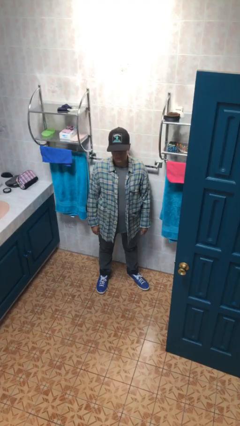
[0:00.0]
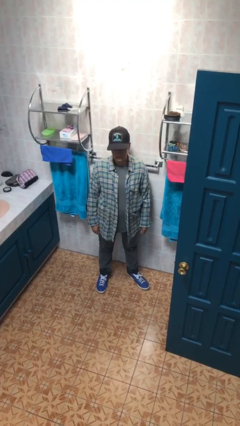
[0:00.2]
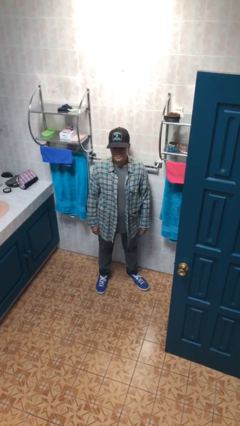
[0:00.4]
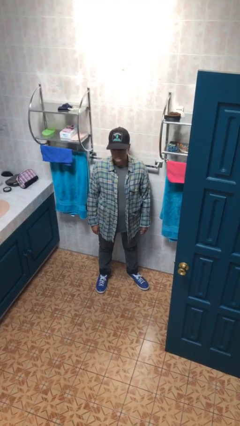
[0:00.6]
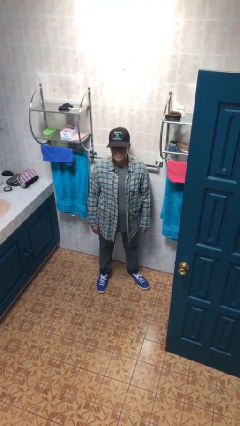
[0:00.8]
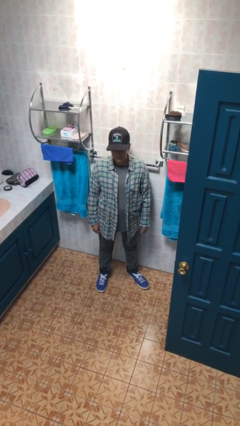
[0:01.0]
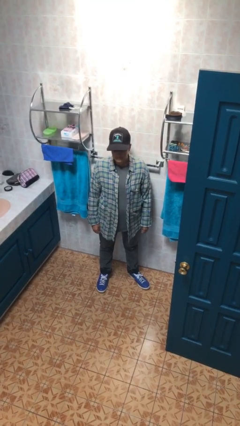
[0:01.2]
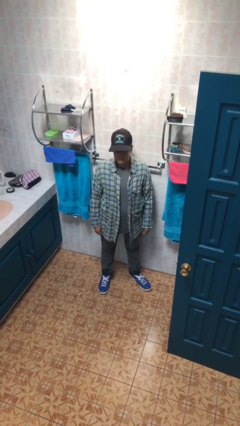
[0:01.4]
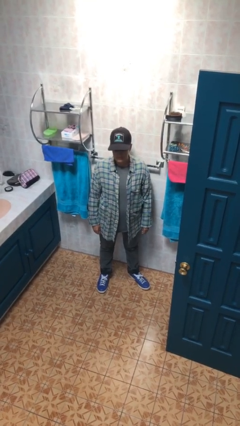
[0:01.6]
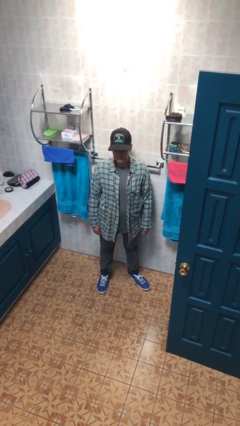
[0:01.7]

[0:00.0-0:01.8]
person nods head

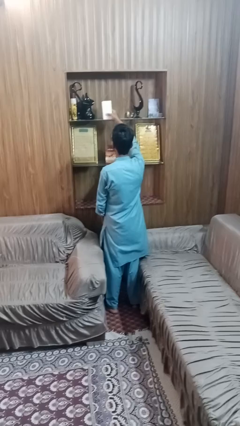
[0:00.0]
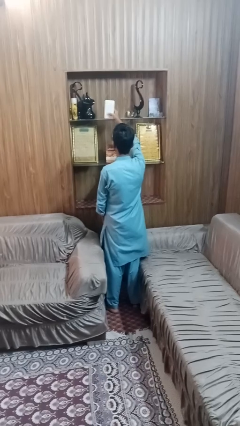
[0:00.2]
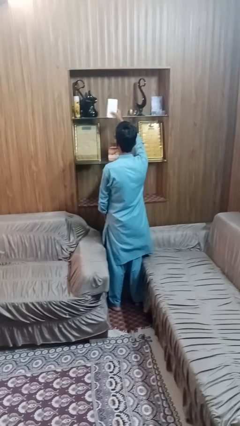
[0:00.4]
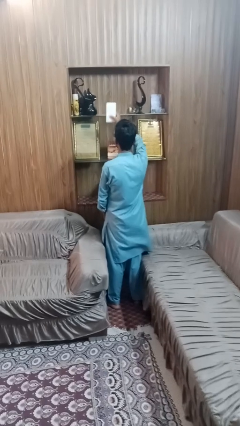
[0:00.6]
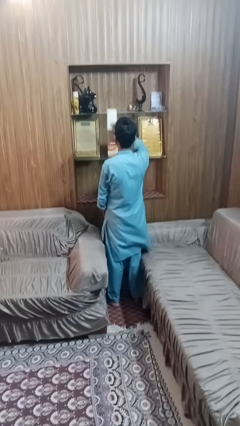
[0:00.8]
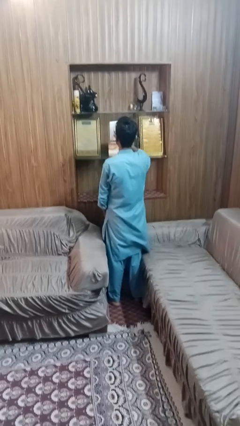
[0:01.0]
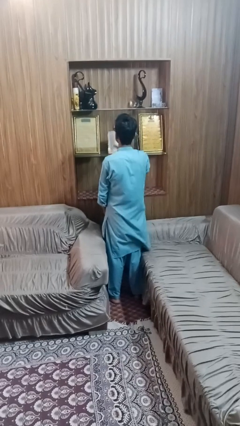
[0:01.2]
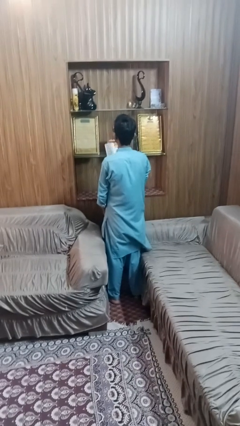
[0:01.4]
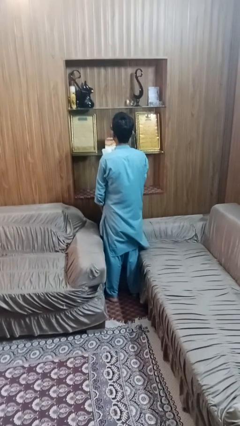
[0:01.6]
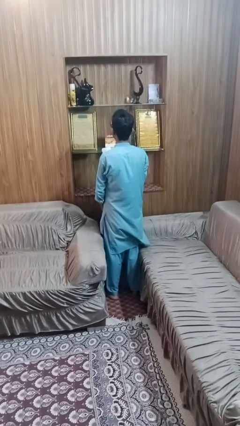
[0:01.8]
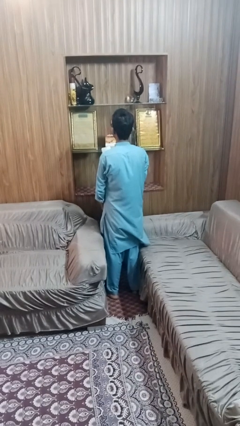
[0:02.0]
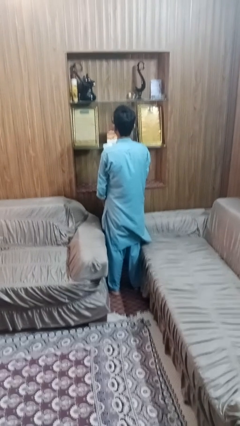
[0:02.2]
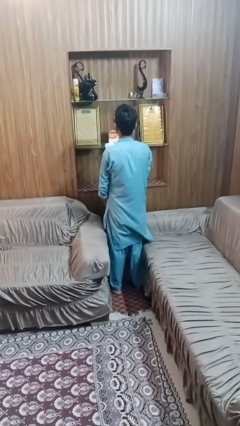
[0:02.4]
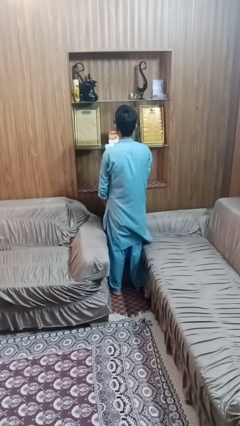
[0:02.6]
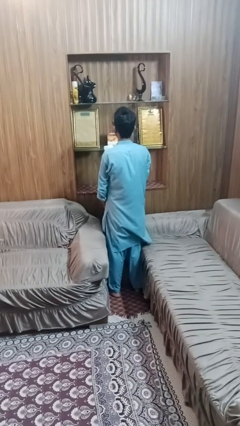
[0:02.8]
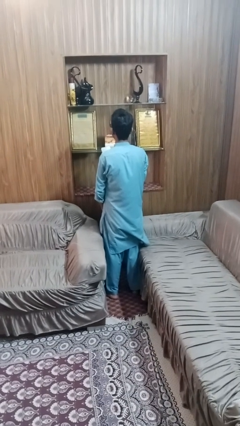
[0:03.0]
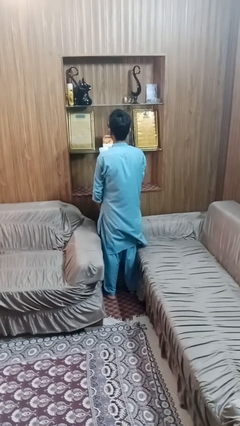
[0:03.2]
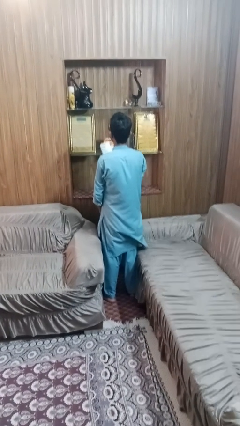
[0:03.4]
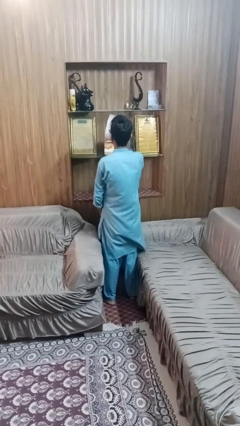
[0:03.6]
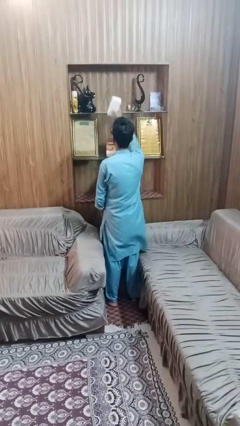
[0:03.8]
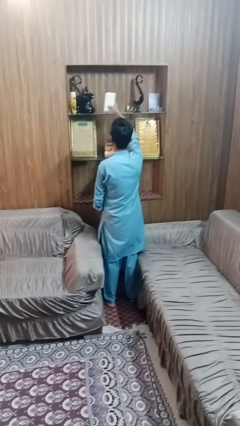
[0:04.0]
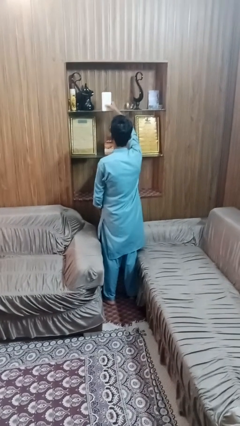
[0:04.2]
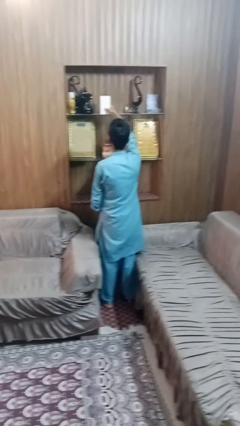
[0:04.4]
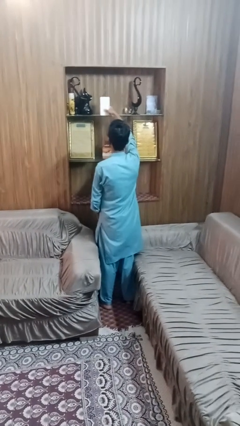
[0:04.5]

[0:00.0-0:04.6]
person picks up object from shelf

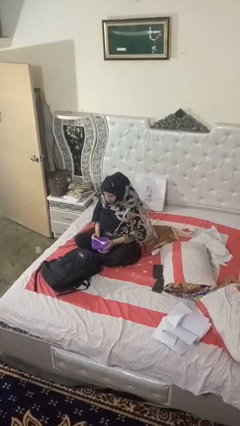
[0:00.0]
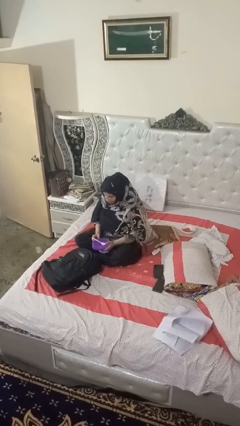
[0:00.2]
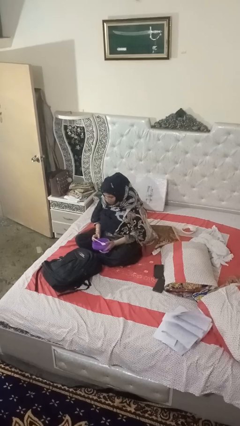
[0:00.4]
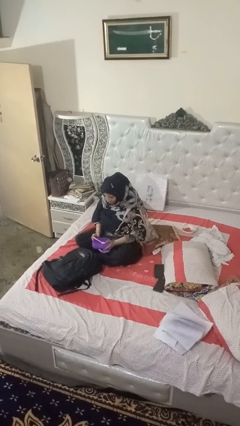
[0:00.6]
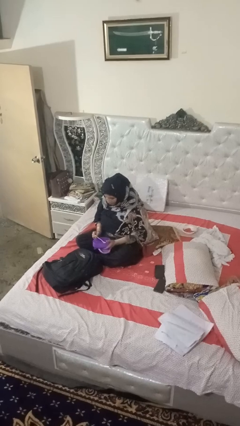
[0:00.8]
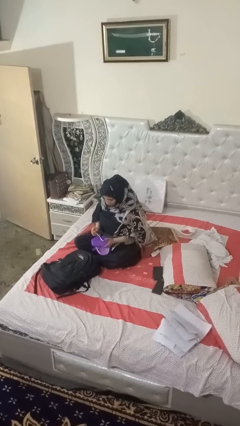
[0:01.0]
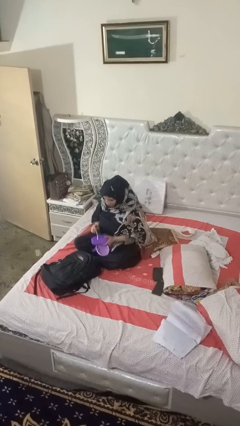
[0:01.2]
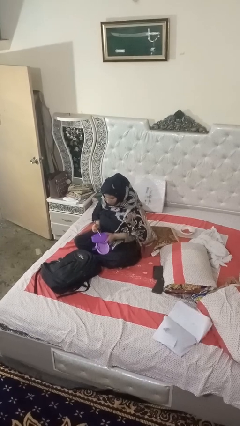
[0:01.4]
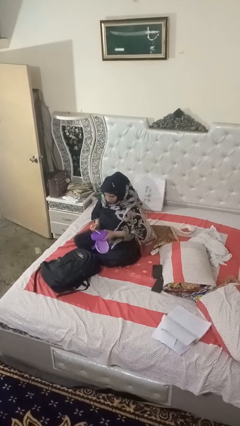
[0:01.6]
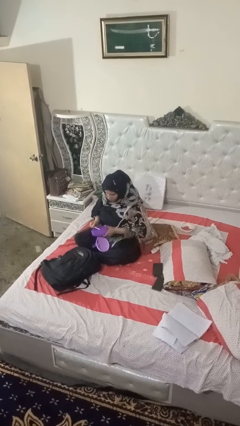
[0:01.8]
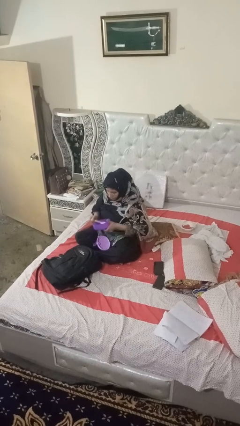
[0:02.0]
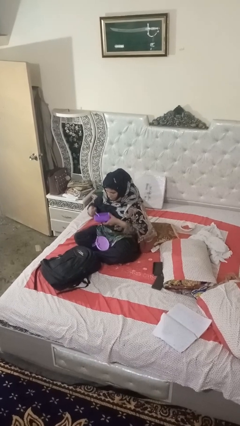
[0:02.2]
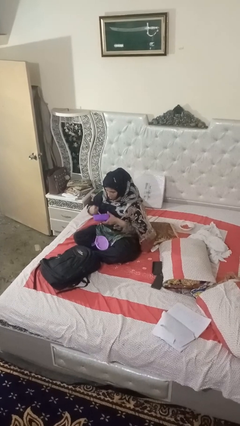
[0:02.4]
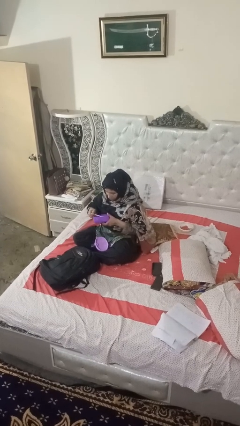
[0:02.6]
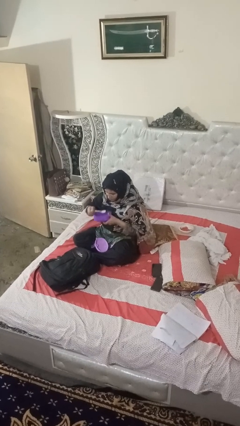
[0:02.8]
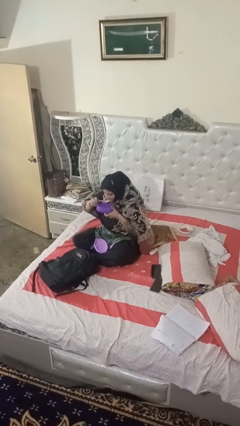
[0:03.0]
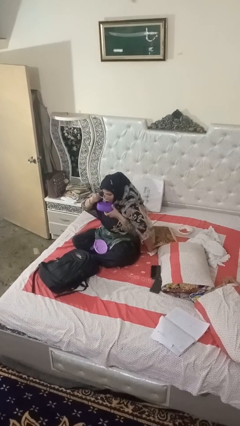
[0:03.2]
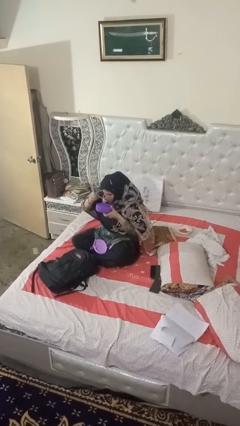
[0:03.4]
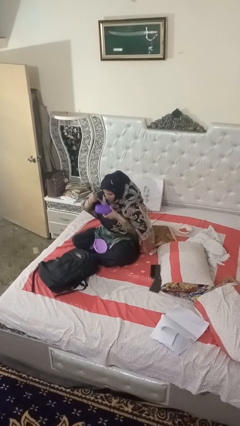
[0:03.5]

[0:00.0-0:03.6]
person eats snack from bag

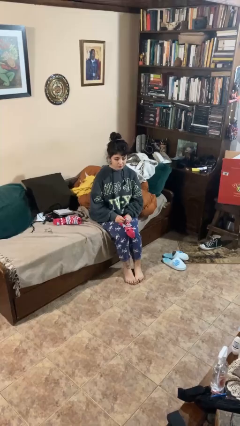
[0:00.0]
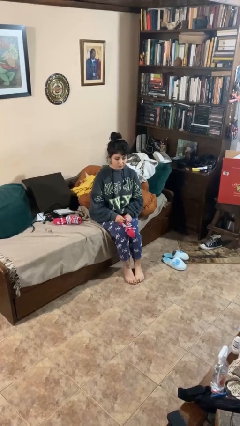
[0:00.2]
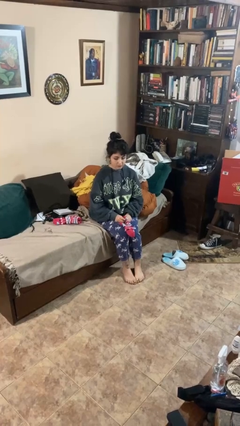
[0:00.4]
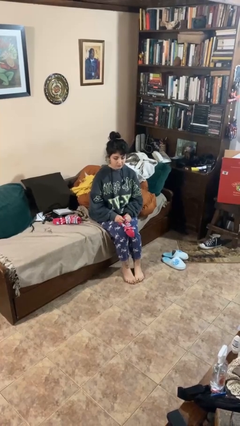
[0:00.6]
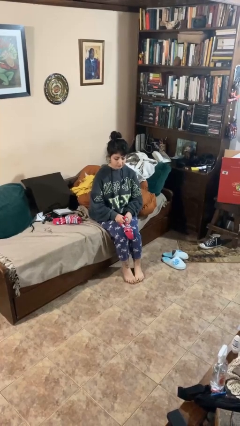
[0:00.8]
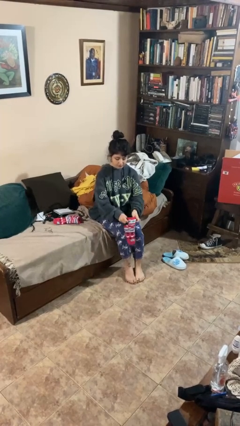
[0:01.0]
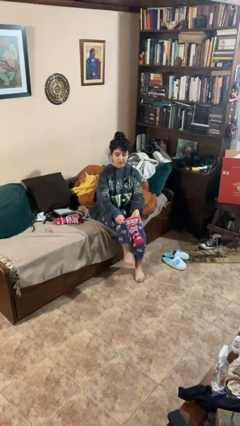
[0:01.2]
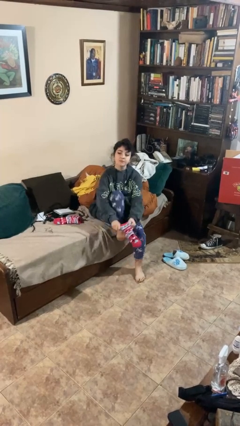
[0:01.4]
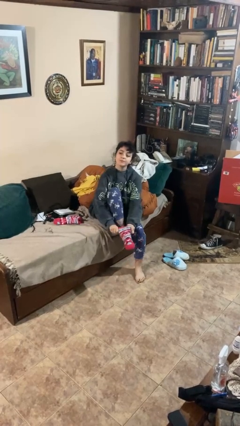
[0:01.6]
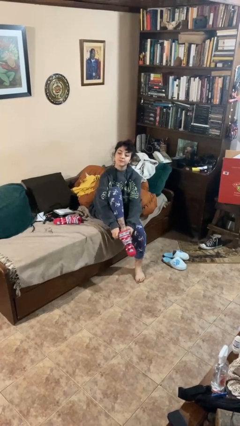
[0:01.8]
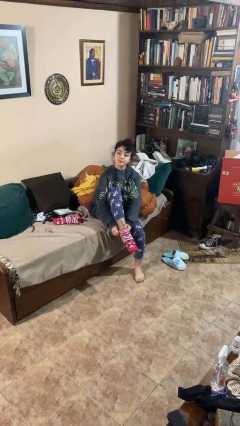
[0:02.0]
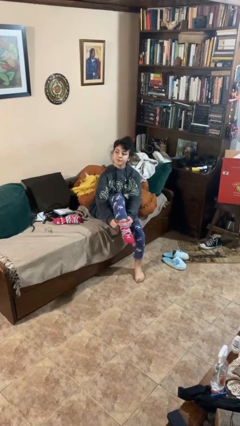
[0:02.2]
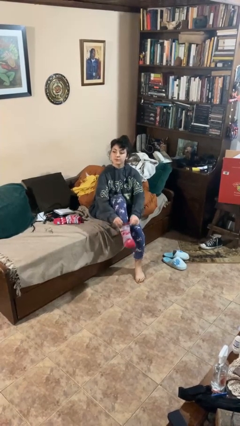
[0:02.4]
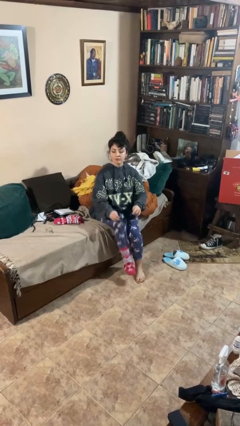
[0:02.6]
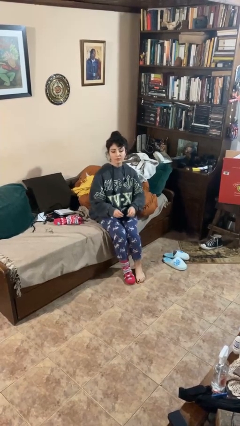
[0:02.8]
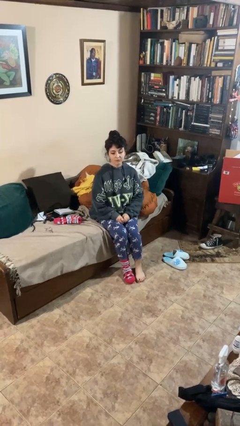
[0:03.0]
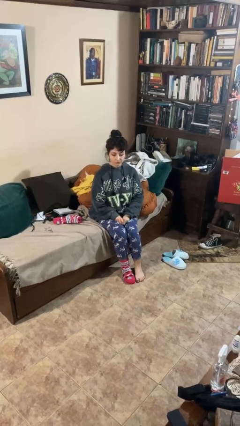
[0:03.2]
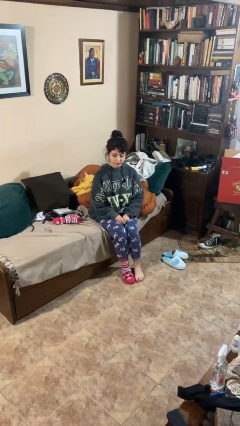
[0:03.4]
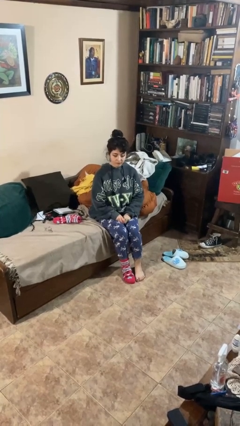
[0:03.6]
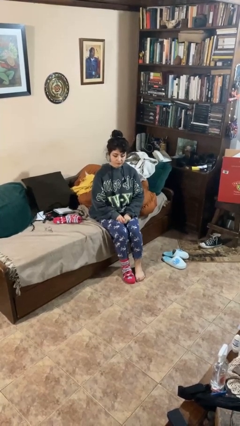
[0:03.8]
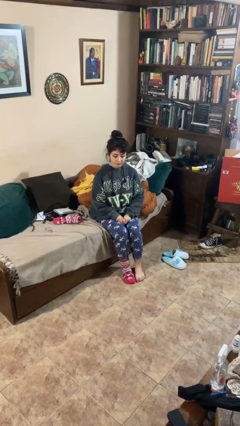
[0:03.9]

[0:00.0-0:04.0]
person puts on socks

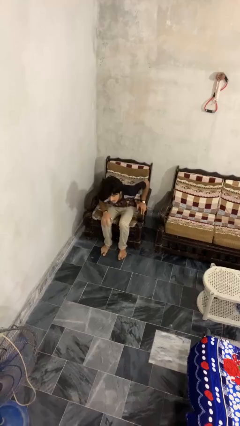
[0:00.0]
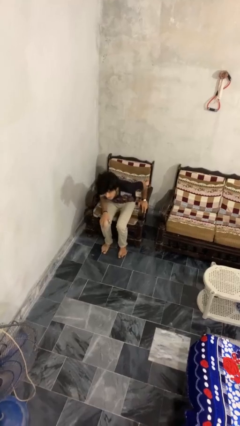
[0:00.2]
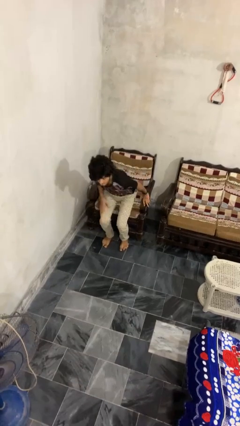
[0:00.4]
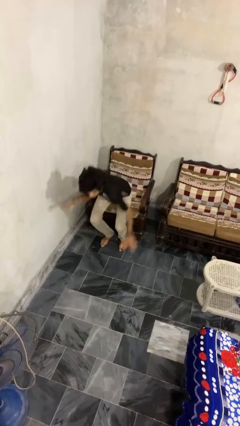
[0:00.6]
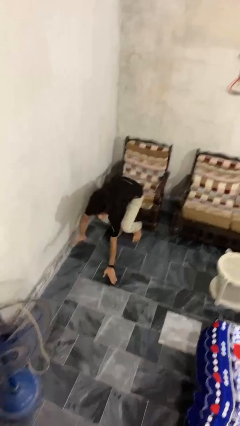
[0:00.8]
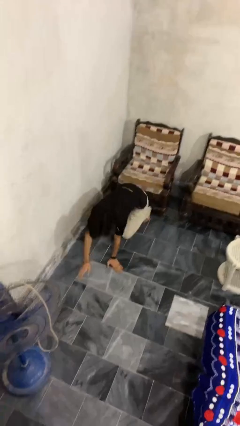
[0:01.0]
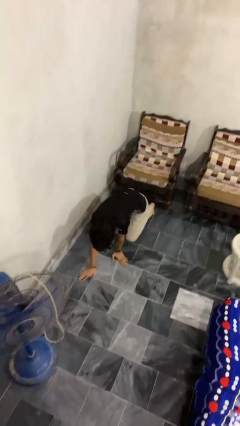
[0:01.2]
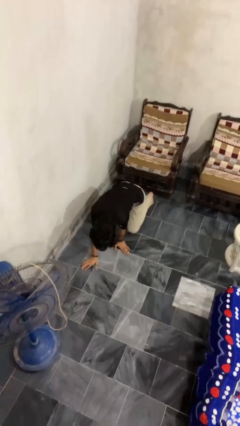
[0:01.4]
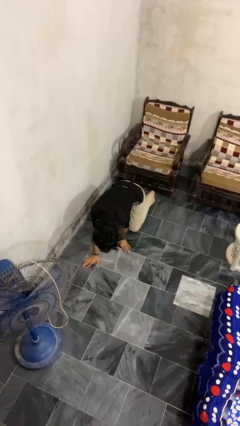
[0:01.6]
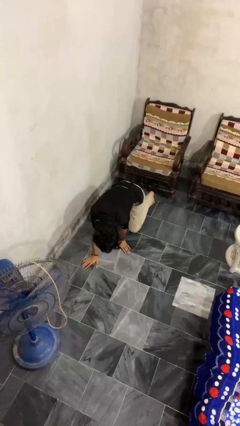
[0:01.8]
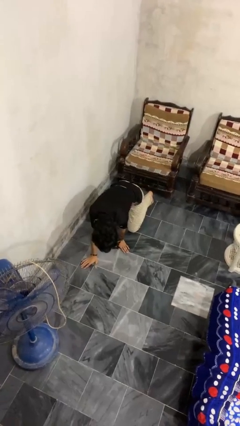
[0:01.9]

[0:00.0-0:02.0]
person falls from chair

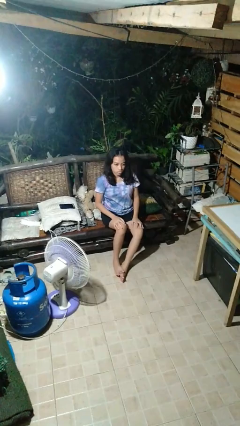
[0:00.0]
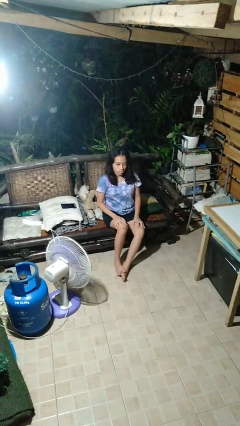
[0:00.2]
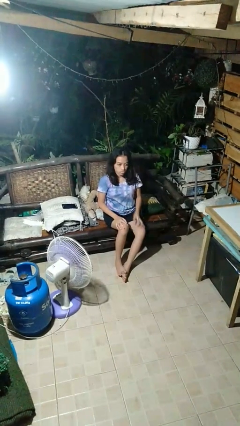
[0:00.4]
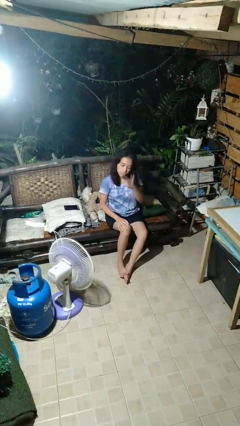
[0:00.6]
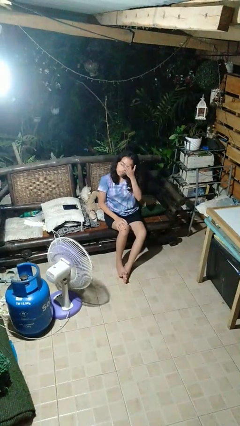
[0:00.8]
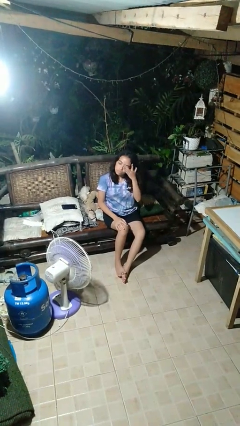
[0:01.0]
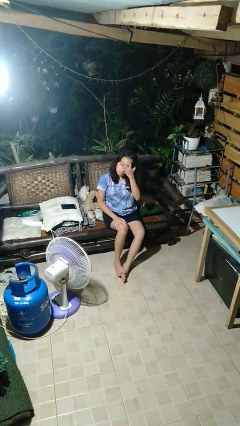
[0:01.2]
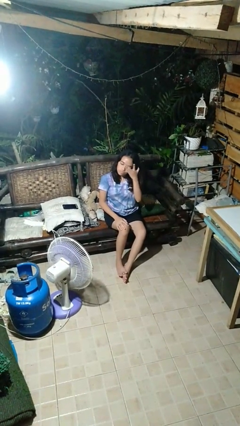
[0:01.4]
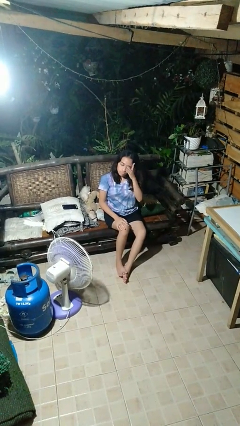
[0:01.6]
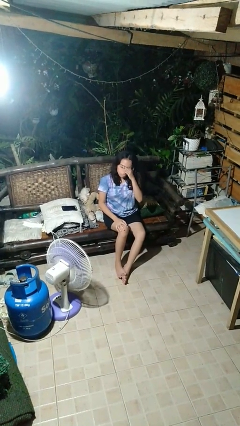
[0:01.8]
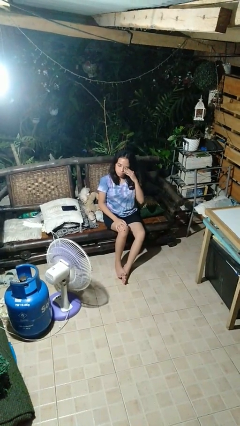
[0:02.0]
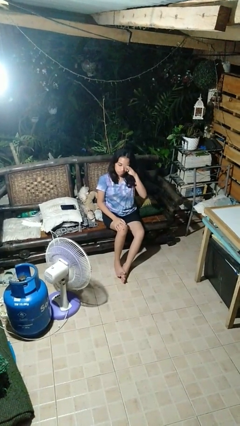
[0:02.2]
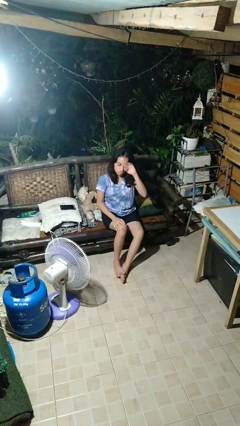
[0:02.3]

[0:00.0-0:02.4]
person rubs eyes
